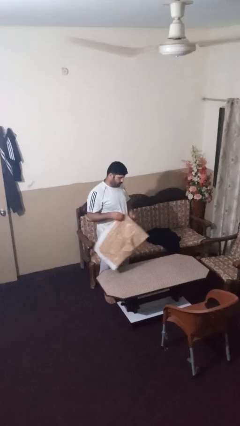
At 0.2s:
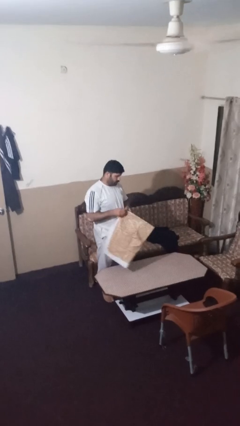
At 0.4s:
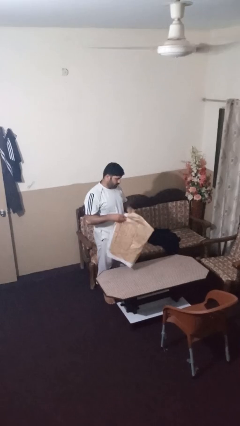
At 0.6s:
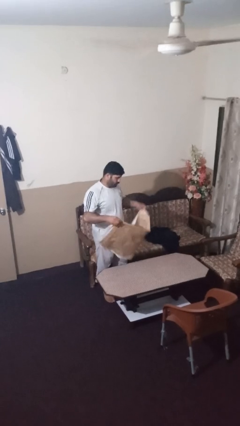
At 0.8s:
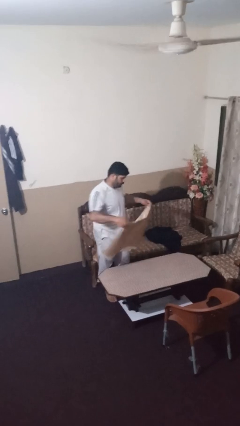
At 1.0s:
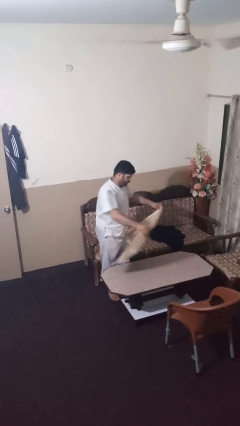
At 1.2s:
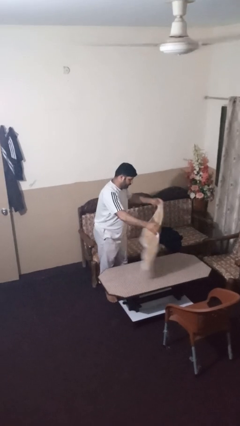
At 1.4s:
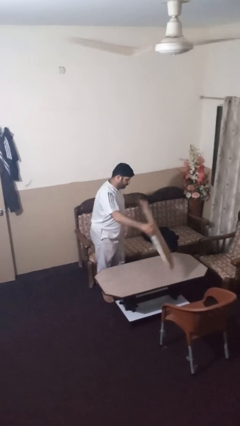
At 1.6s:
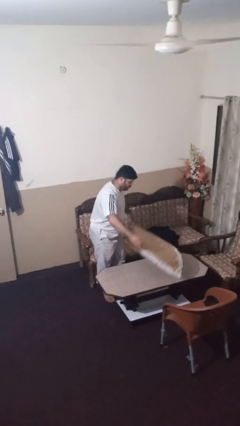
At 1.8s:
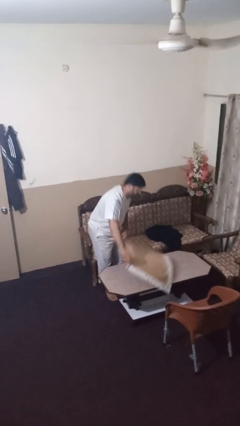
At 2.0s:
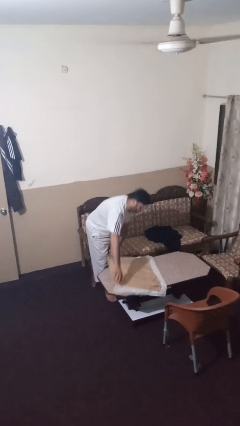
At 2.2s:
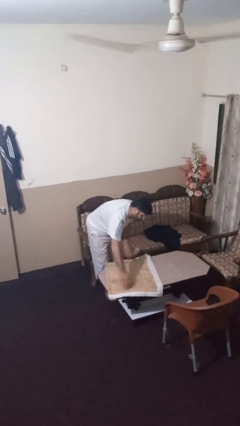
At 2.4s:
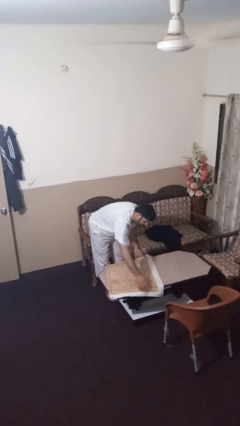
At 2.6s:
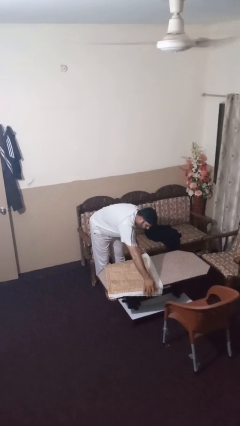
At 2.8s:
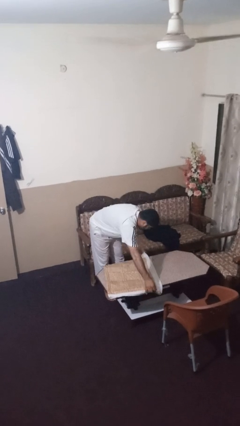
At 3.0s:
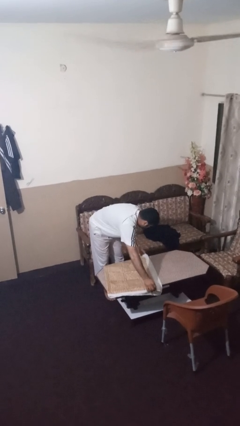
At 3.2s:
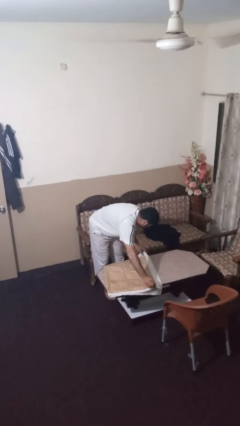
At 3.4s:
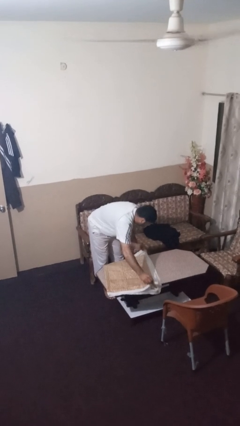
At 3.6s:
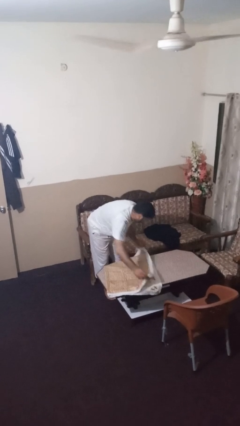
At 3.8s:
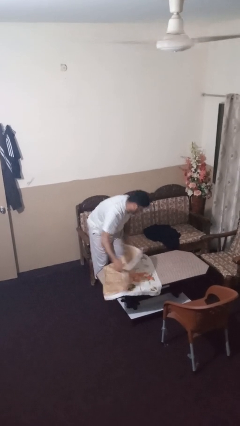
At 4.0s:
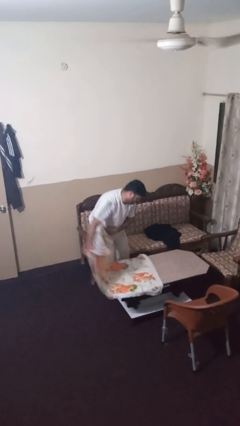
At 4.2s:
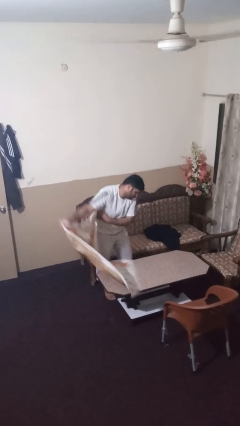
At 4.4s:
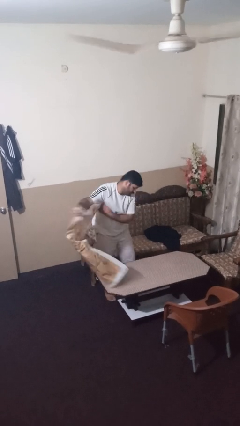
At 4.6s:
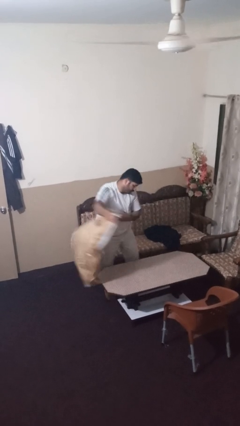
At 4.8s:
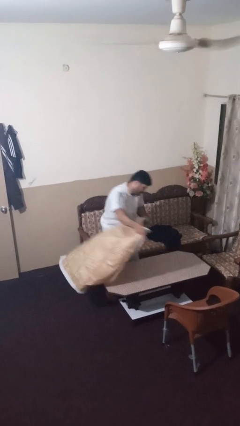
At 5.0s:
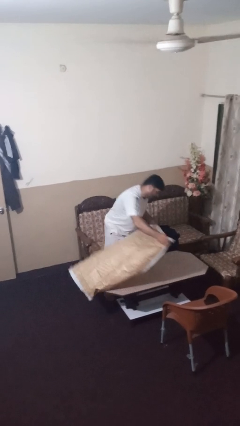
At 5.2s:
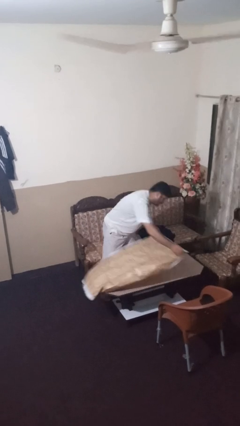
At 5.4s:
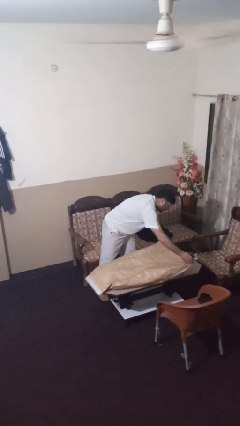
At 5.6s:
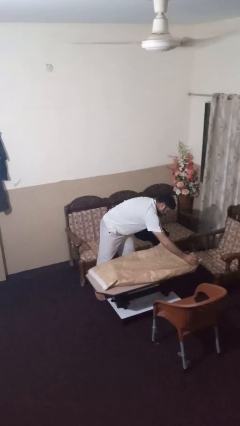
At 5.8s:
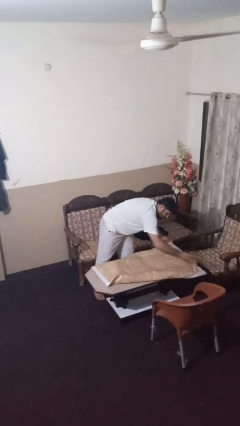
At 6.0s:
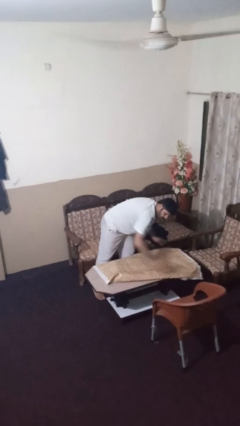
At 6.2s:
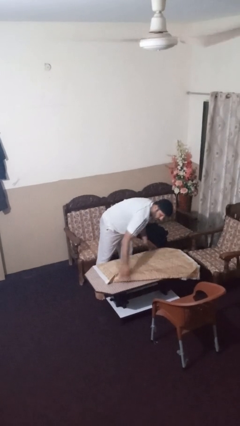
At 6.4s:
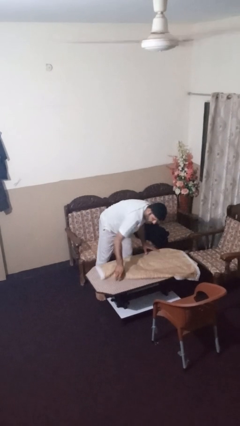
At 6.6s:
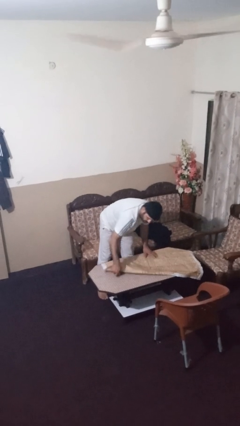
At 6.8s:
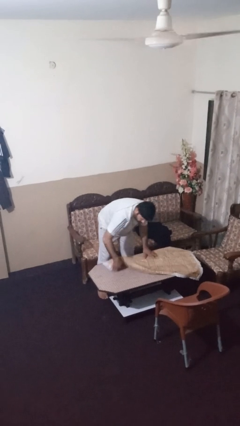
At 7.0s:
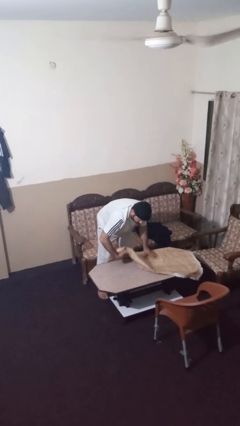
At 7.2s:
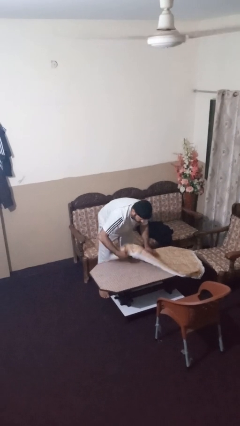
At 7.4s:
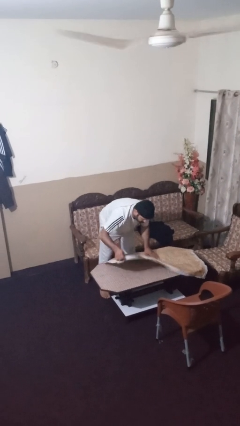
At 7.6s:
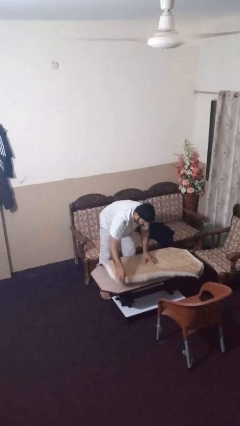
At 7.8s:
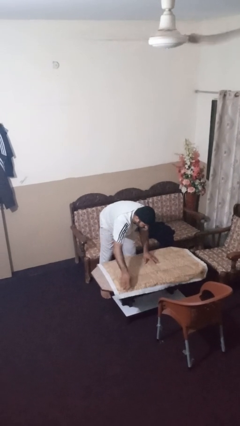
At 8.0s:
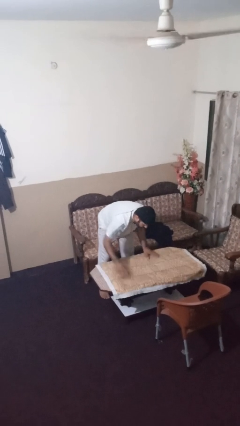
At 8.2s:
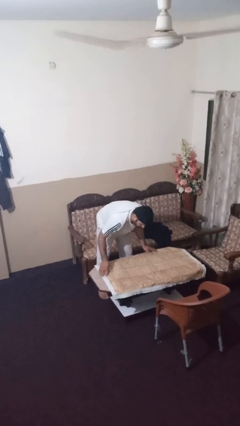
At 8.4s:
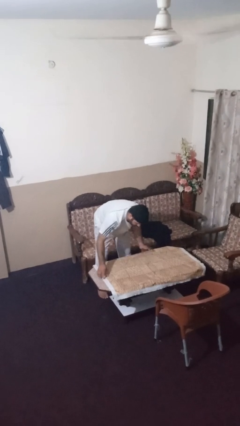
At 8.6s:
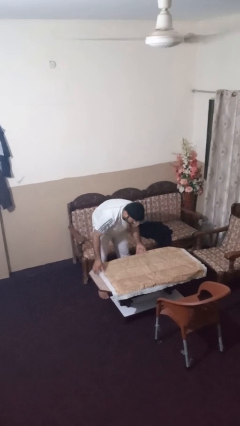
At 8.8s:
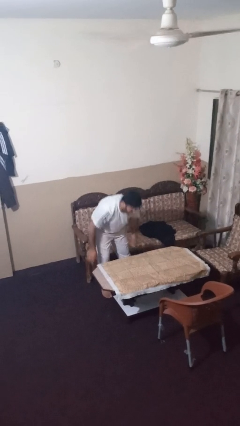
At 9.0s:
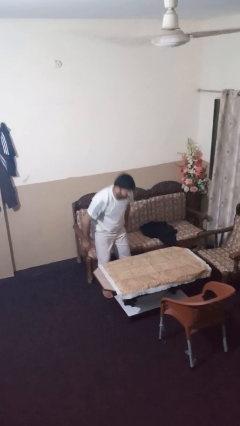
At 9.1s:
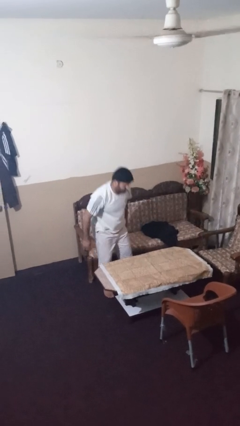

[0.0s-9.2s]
person spreads tablecloth

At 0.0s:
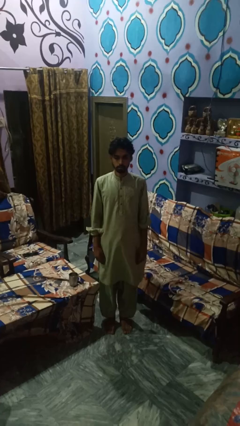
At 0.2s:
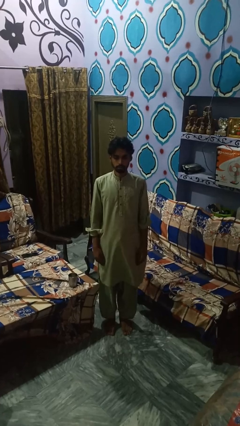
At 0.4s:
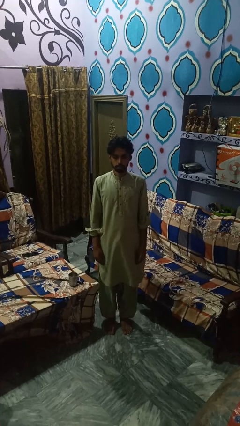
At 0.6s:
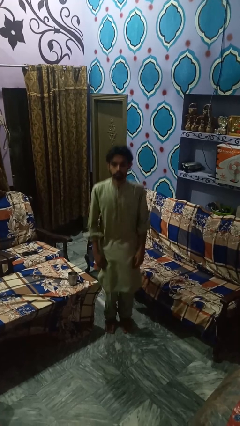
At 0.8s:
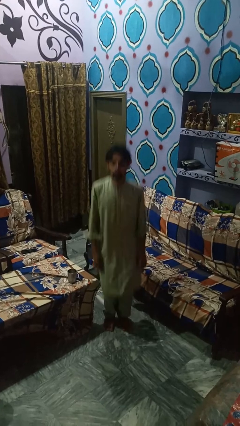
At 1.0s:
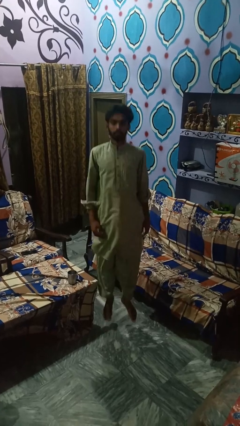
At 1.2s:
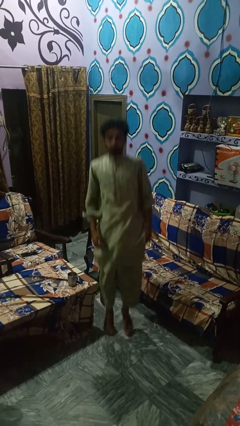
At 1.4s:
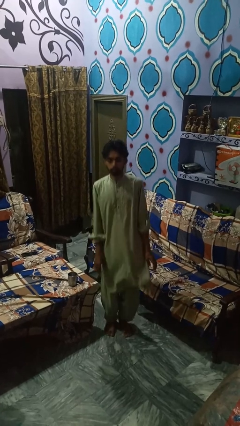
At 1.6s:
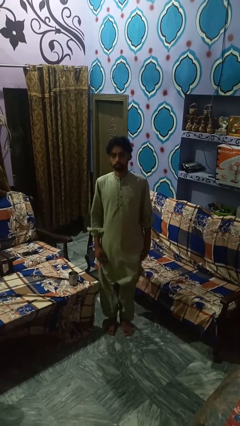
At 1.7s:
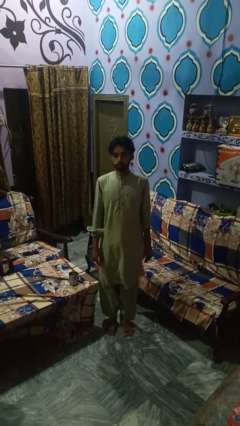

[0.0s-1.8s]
person jumps

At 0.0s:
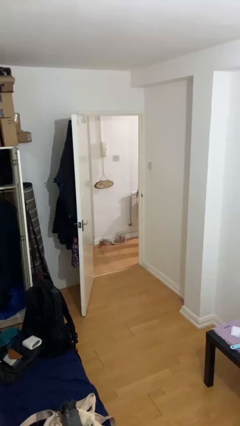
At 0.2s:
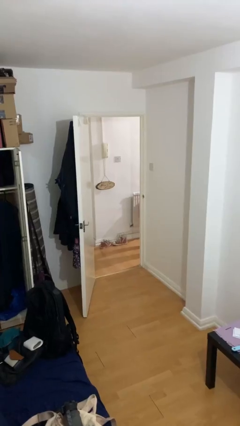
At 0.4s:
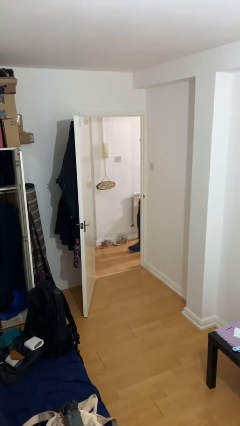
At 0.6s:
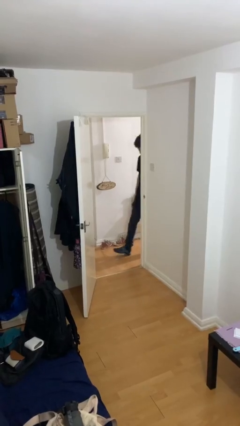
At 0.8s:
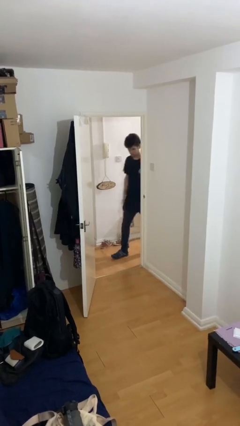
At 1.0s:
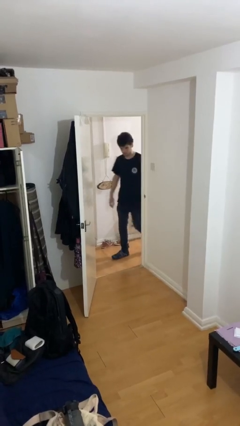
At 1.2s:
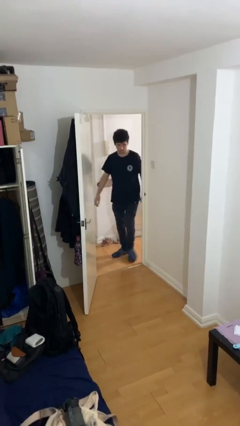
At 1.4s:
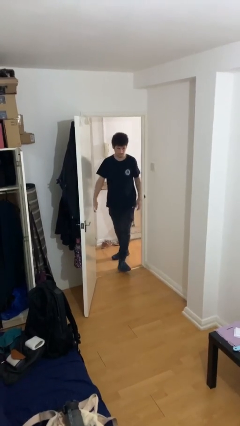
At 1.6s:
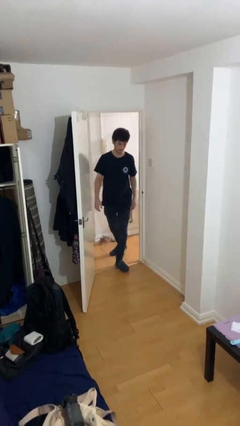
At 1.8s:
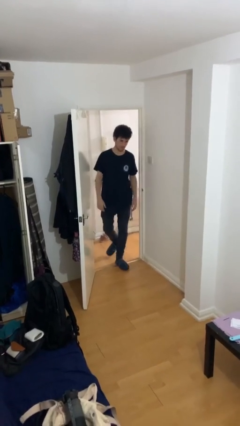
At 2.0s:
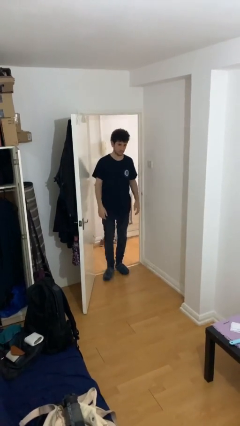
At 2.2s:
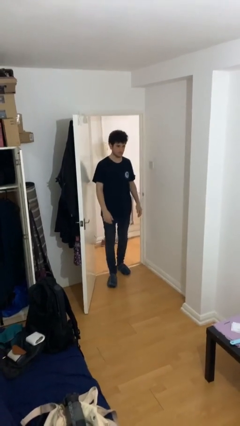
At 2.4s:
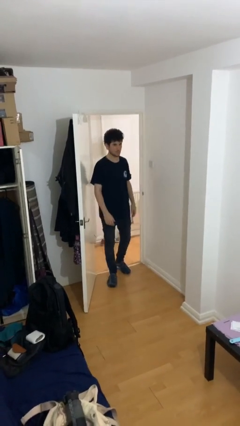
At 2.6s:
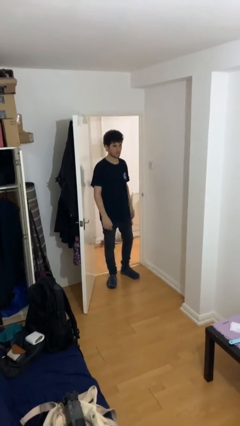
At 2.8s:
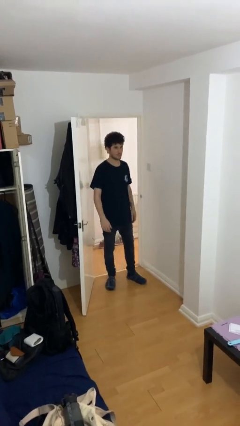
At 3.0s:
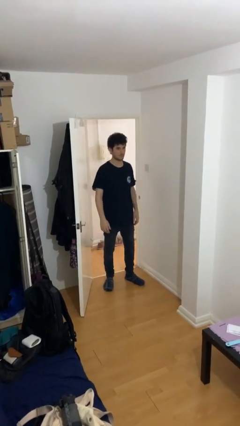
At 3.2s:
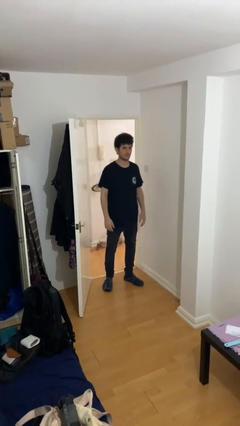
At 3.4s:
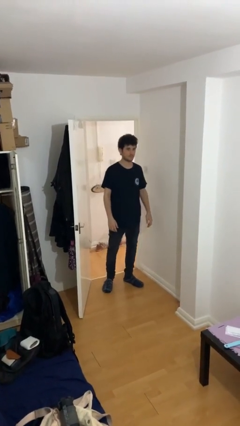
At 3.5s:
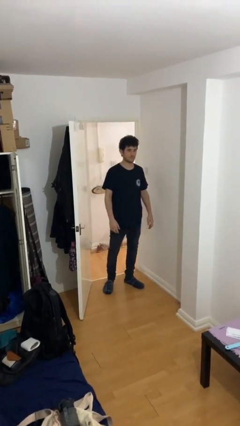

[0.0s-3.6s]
person enters scene through structure

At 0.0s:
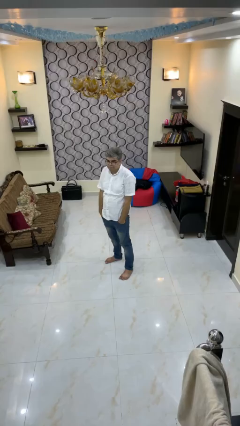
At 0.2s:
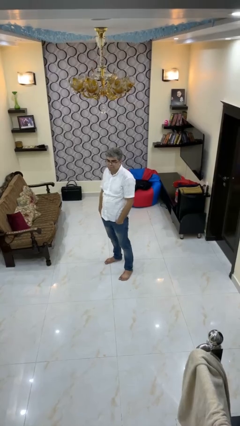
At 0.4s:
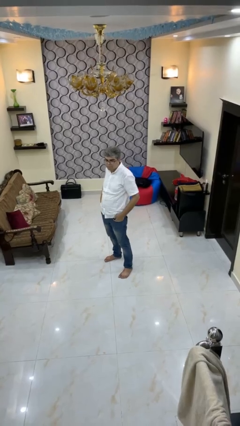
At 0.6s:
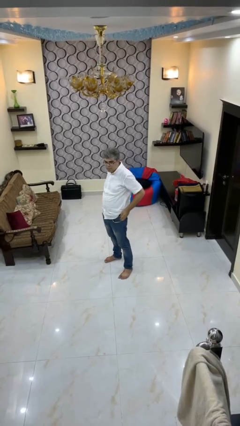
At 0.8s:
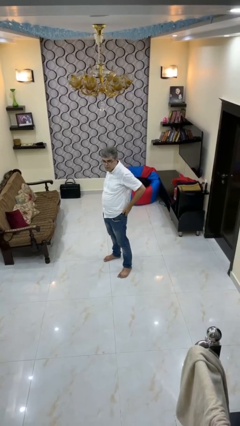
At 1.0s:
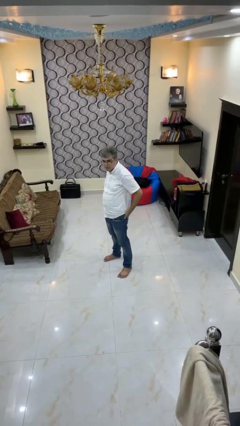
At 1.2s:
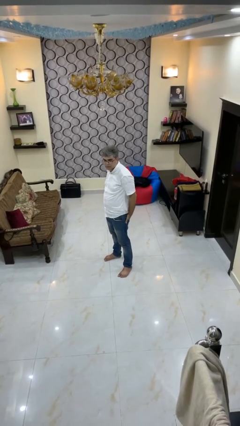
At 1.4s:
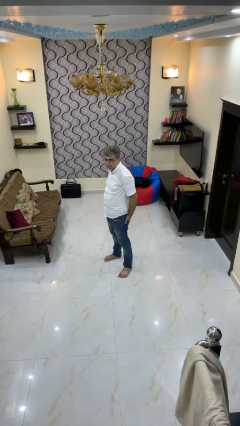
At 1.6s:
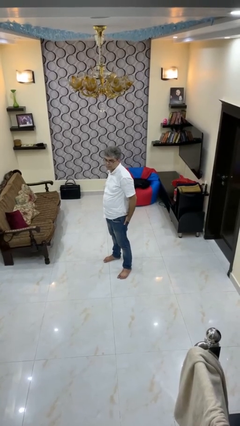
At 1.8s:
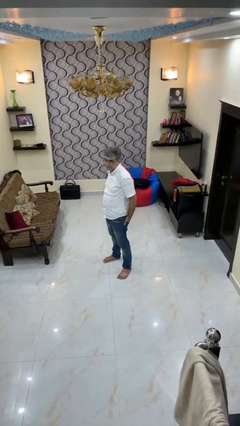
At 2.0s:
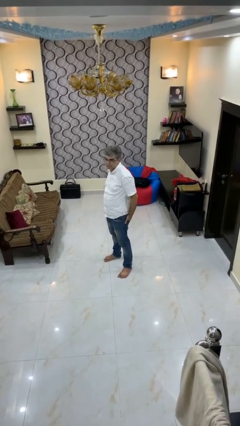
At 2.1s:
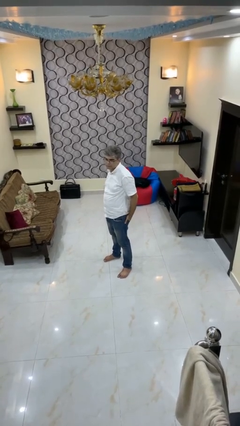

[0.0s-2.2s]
person puts hands in back pockets

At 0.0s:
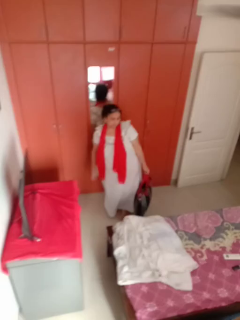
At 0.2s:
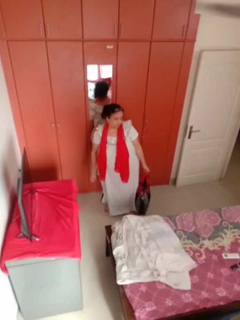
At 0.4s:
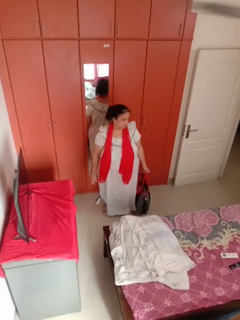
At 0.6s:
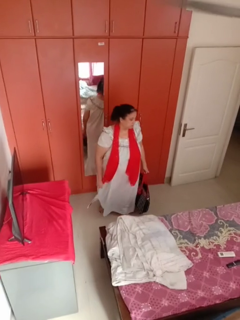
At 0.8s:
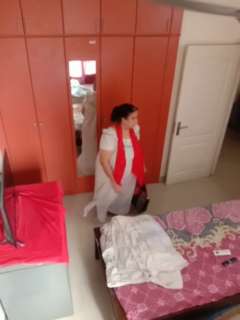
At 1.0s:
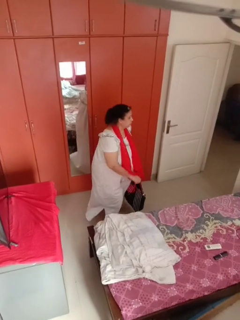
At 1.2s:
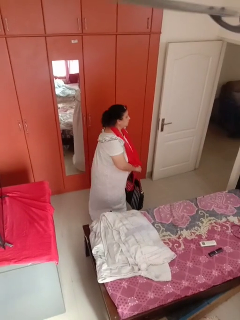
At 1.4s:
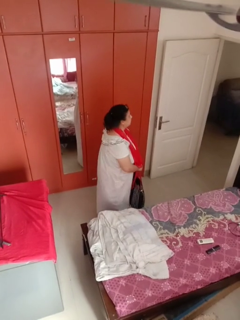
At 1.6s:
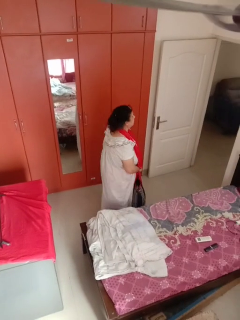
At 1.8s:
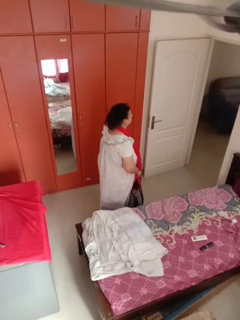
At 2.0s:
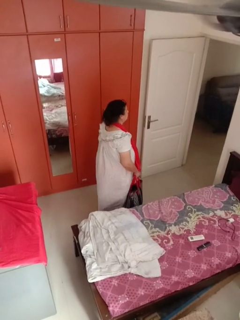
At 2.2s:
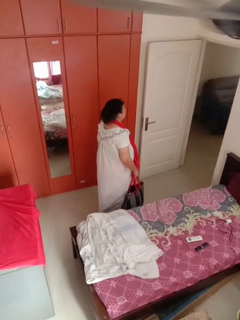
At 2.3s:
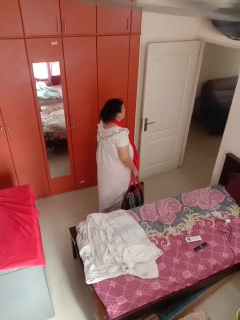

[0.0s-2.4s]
person carries groceries
